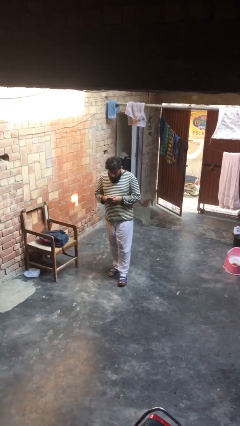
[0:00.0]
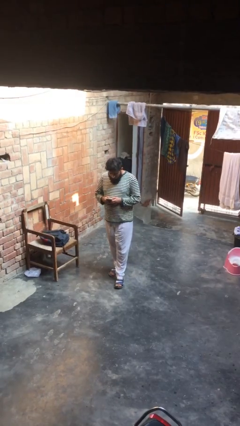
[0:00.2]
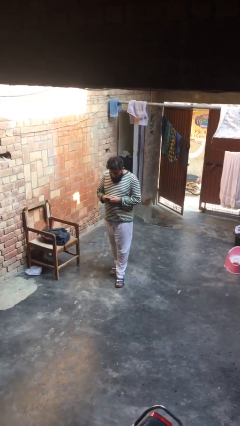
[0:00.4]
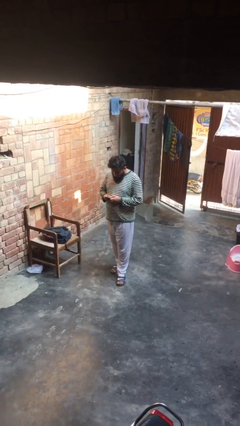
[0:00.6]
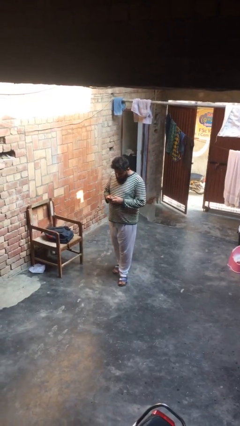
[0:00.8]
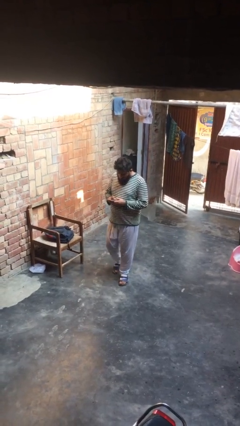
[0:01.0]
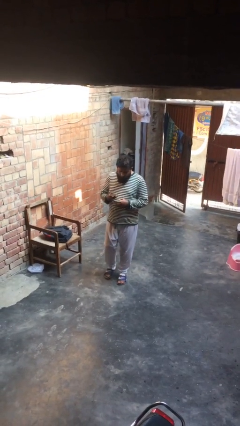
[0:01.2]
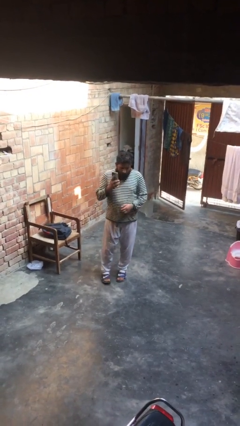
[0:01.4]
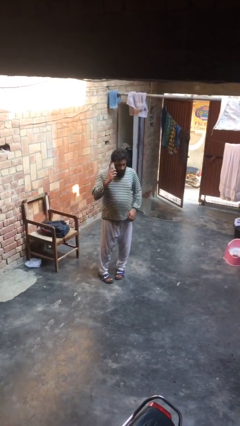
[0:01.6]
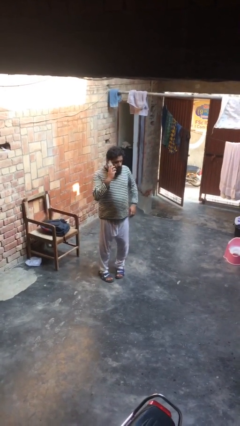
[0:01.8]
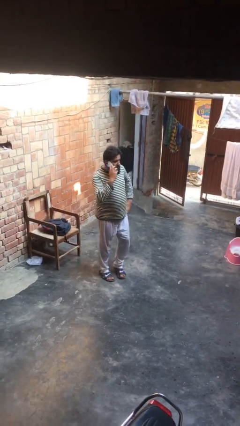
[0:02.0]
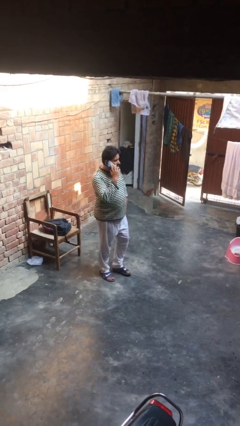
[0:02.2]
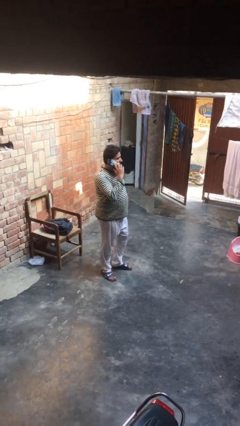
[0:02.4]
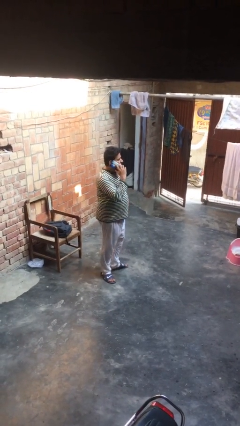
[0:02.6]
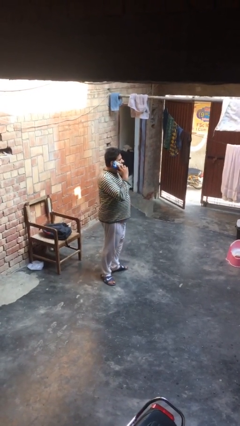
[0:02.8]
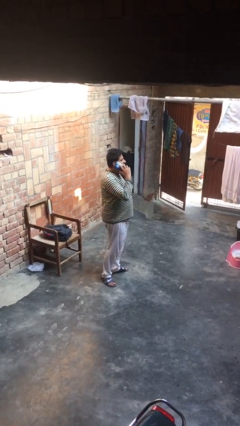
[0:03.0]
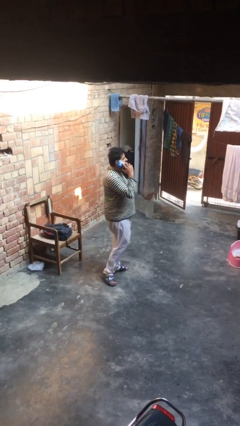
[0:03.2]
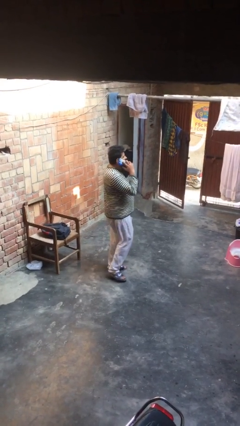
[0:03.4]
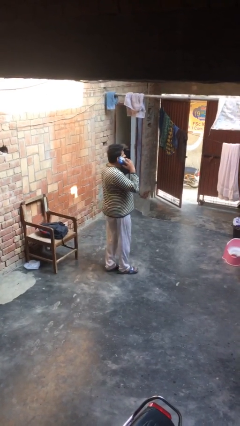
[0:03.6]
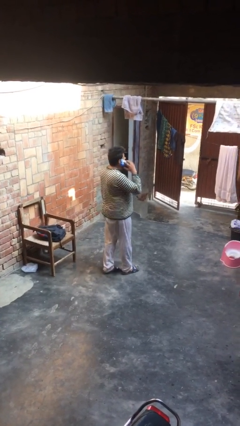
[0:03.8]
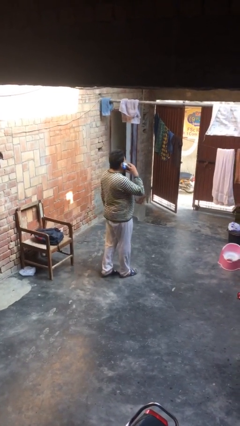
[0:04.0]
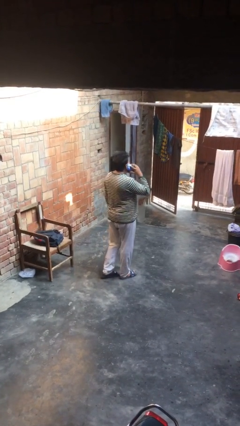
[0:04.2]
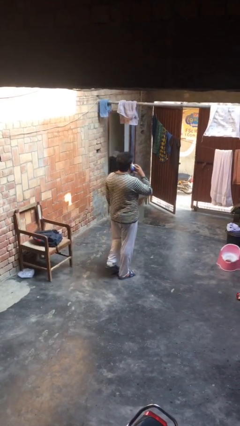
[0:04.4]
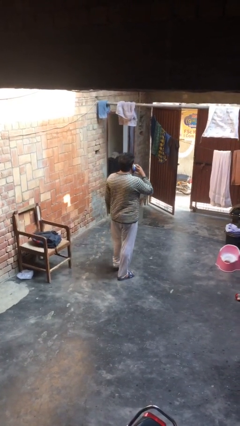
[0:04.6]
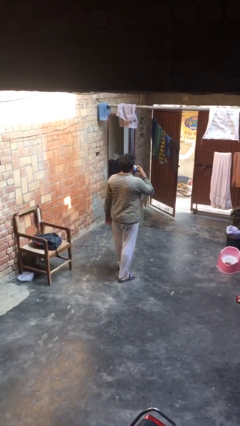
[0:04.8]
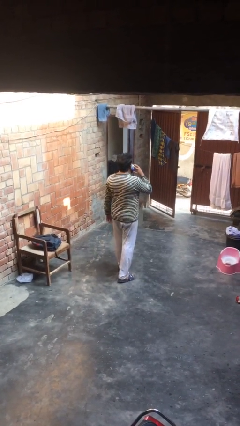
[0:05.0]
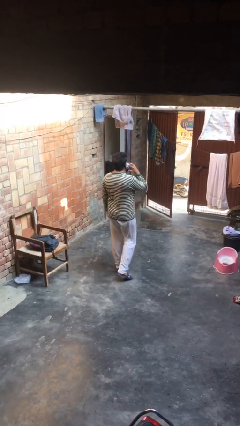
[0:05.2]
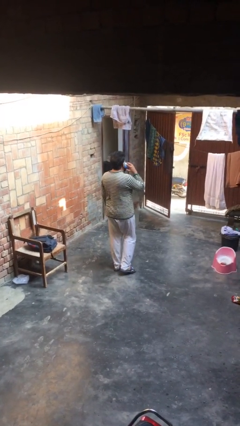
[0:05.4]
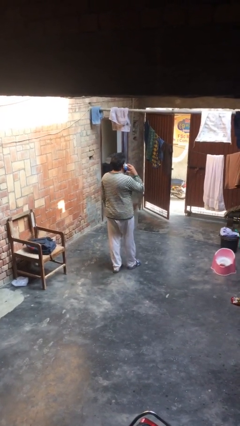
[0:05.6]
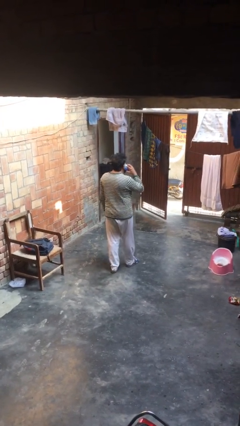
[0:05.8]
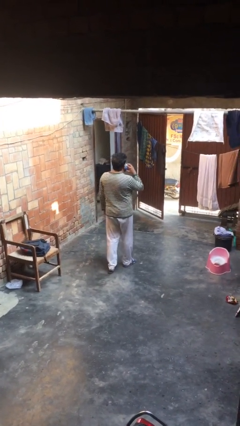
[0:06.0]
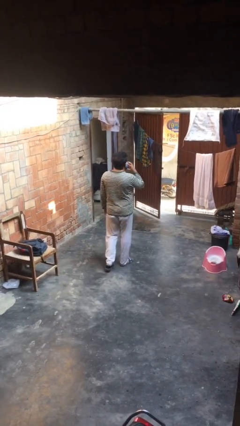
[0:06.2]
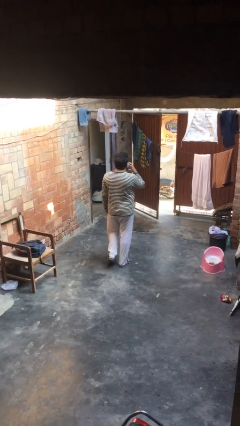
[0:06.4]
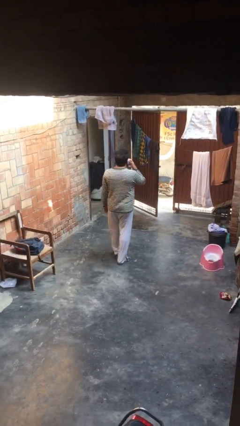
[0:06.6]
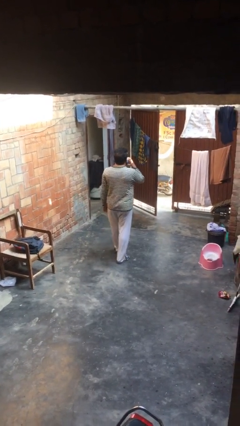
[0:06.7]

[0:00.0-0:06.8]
person talks on phone

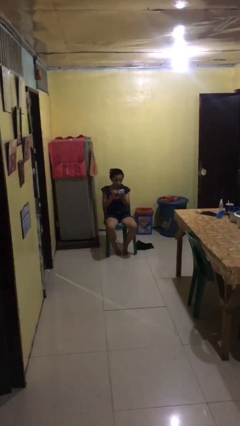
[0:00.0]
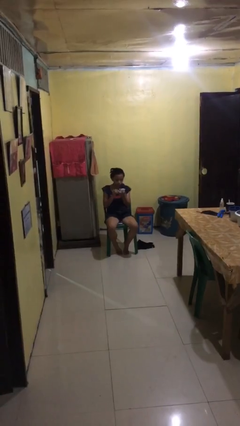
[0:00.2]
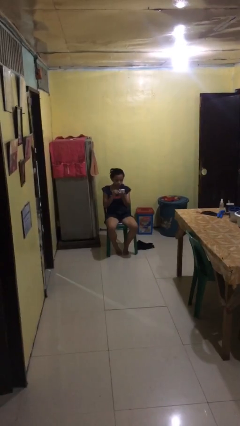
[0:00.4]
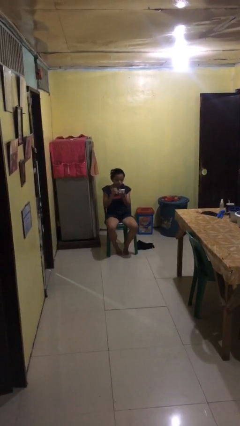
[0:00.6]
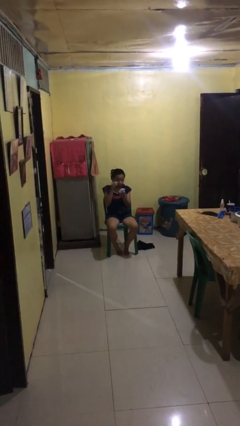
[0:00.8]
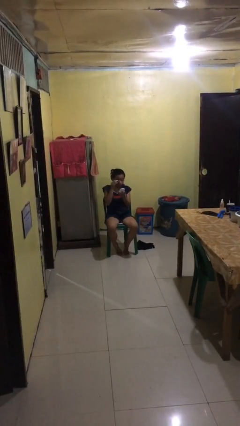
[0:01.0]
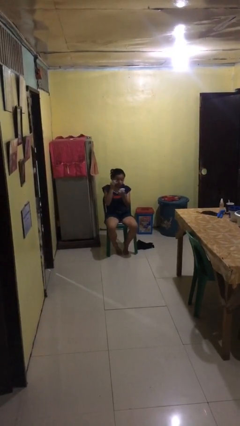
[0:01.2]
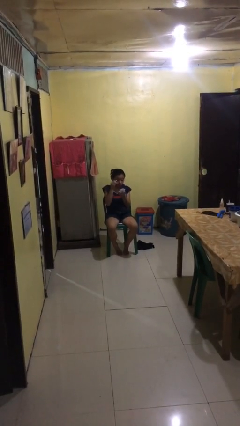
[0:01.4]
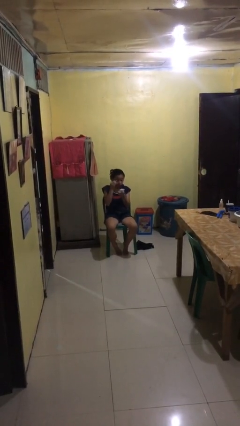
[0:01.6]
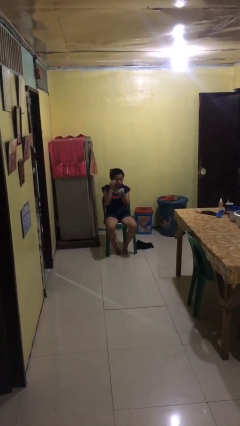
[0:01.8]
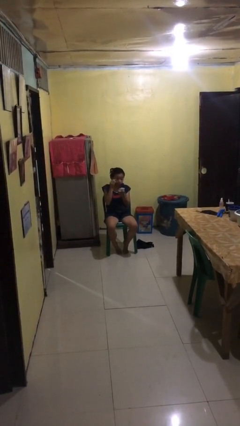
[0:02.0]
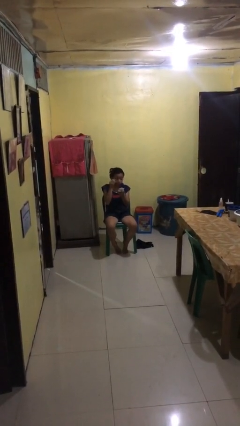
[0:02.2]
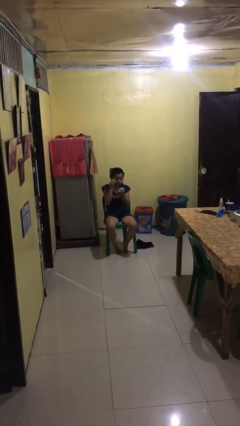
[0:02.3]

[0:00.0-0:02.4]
person applies eye makeup

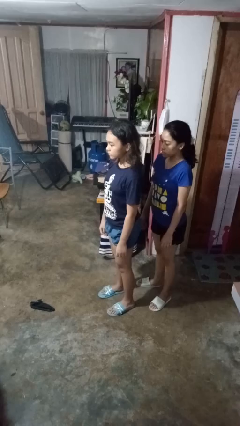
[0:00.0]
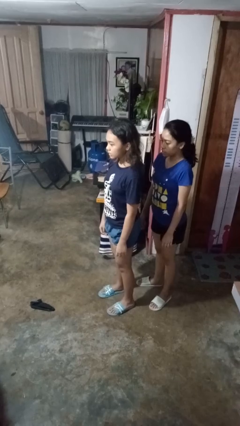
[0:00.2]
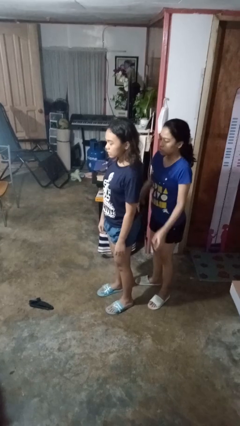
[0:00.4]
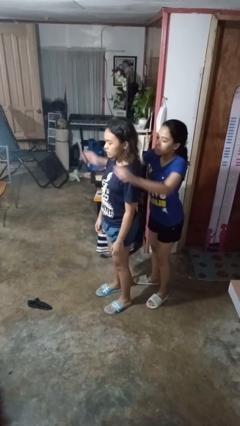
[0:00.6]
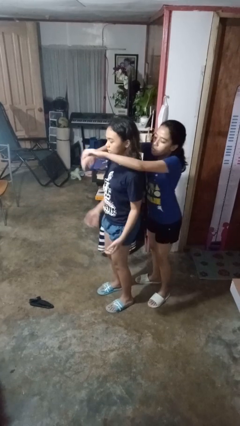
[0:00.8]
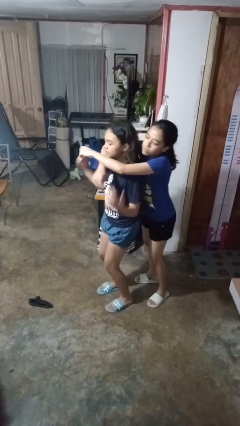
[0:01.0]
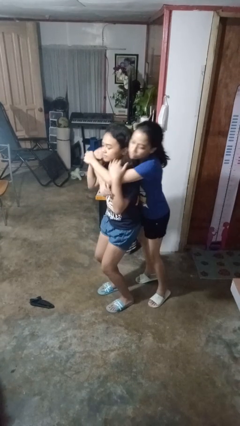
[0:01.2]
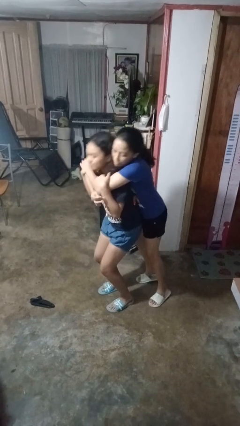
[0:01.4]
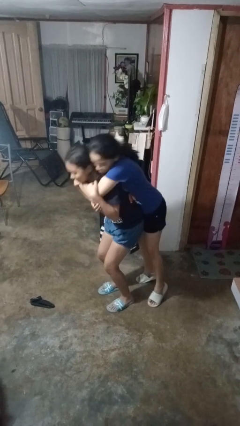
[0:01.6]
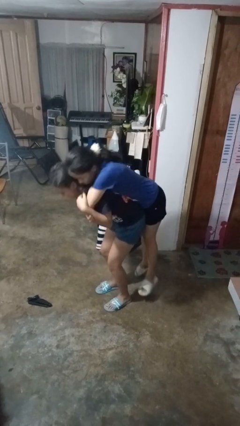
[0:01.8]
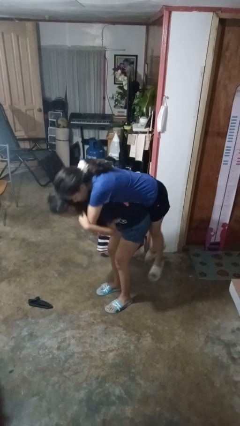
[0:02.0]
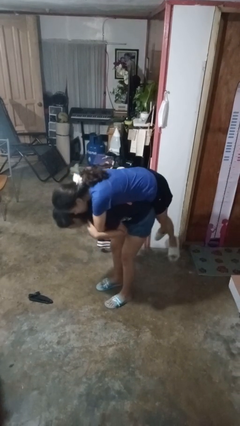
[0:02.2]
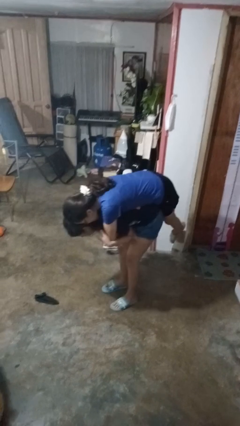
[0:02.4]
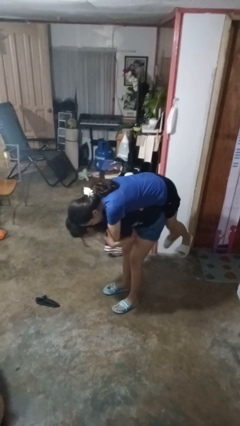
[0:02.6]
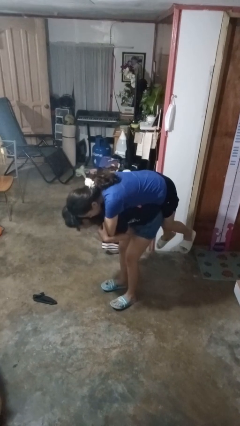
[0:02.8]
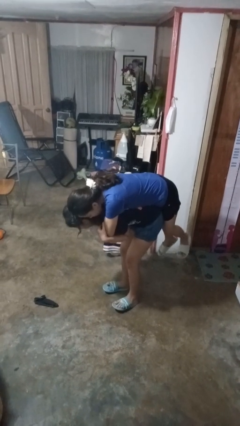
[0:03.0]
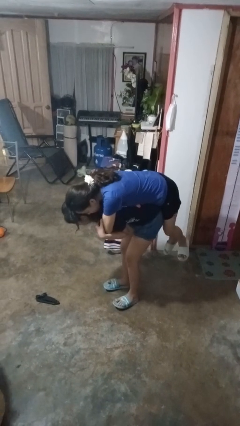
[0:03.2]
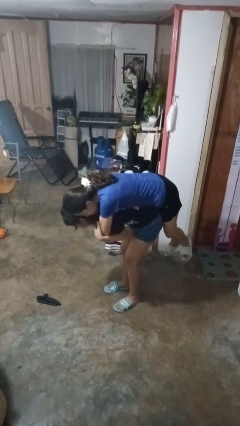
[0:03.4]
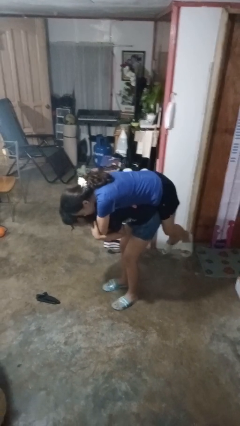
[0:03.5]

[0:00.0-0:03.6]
person picks up person

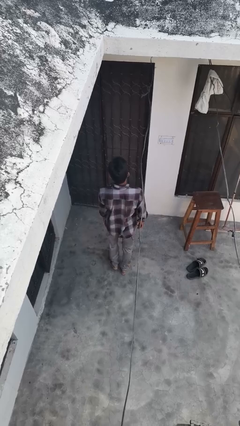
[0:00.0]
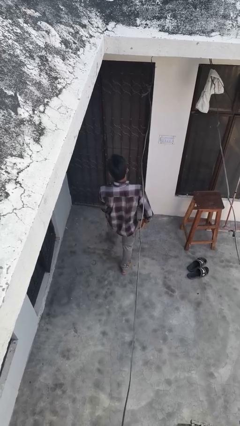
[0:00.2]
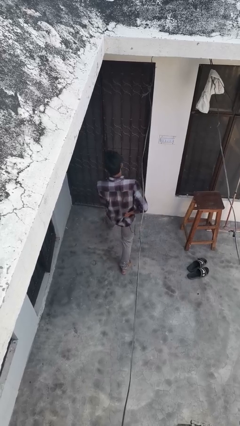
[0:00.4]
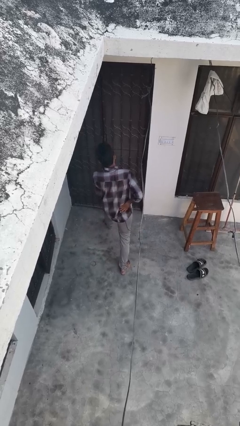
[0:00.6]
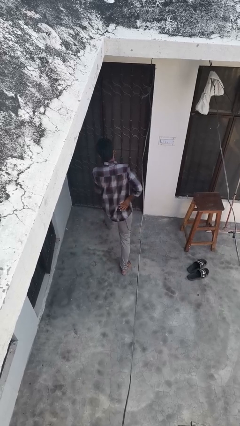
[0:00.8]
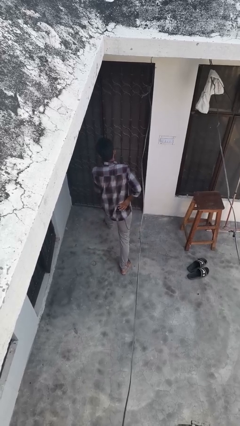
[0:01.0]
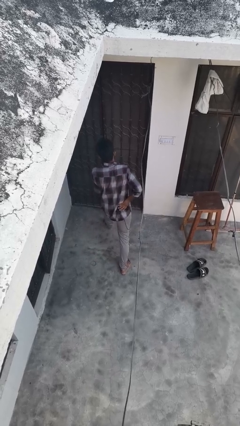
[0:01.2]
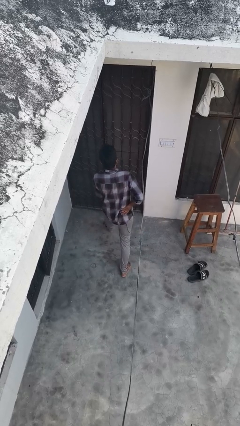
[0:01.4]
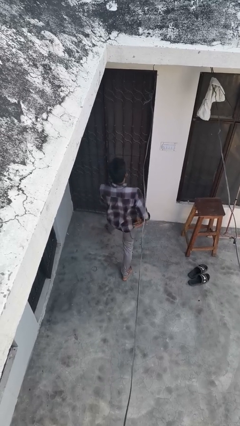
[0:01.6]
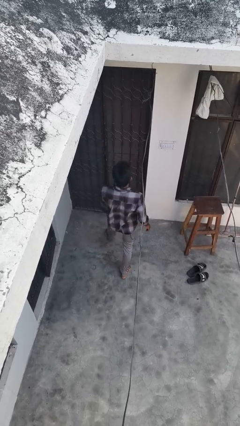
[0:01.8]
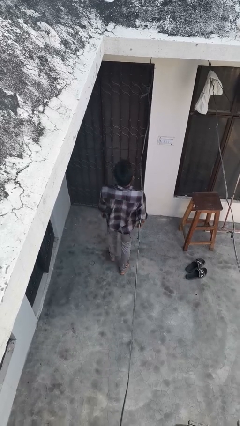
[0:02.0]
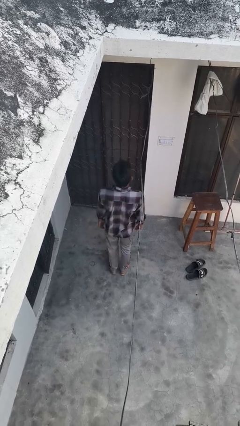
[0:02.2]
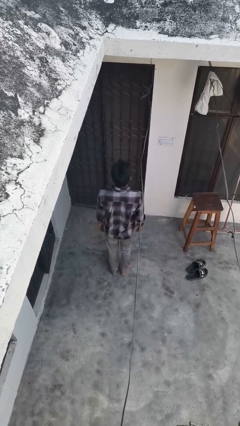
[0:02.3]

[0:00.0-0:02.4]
person exercises with lunges

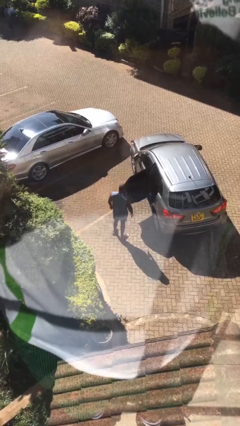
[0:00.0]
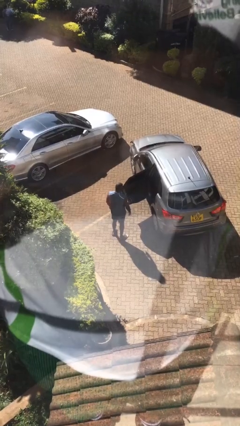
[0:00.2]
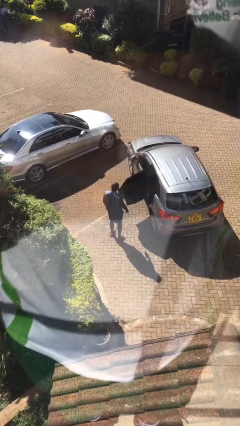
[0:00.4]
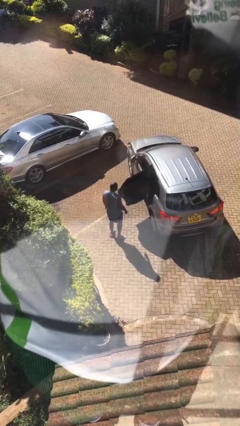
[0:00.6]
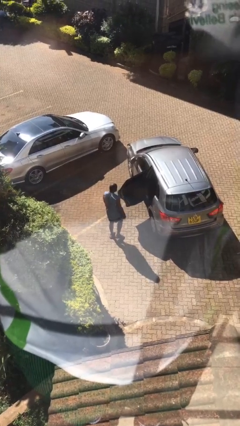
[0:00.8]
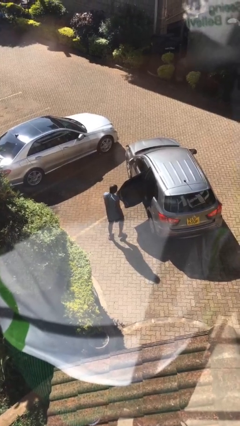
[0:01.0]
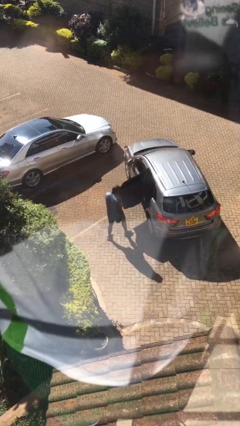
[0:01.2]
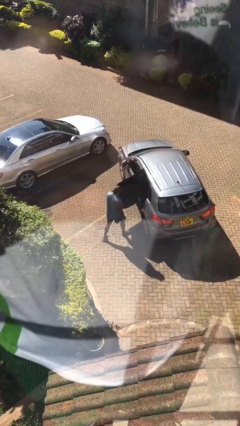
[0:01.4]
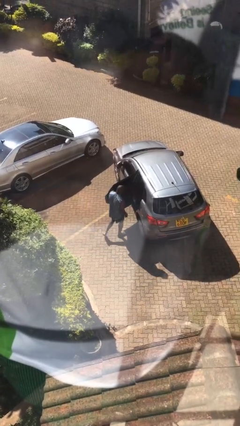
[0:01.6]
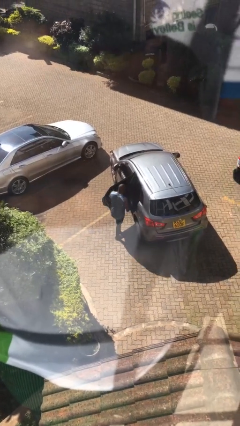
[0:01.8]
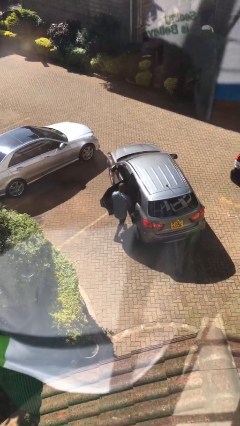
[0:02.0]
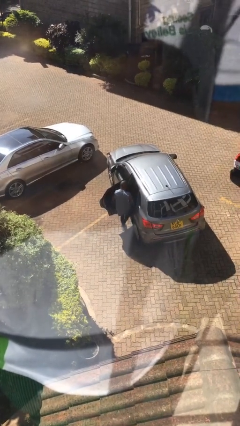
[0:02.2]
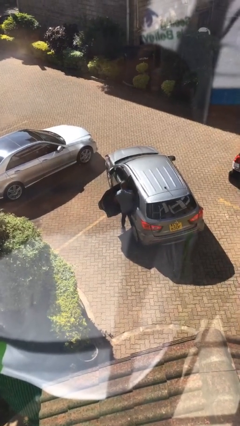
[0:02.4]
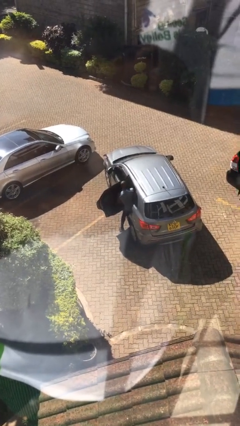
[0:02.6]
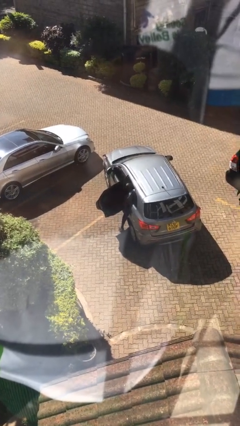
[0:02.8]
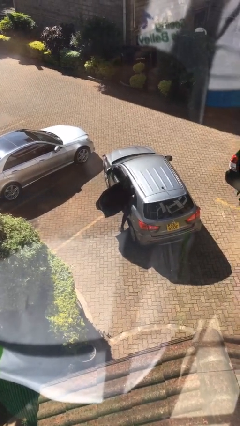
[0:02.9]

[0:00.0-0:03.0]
person enters car
